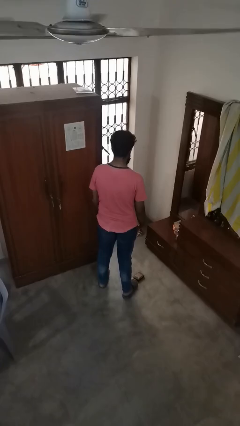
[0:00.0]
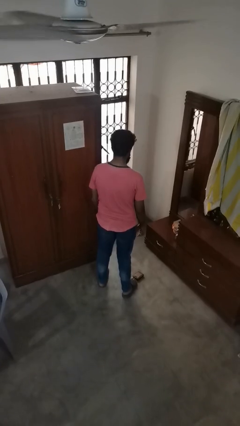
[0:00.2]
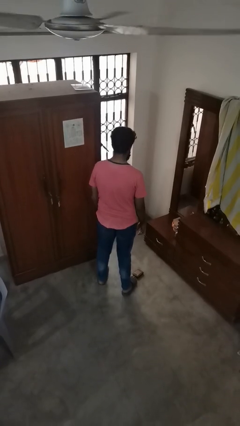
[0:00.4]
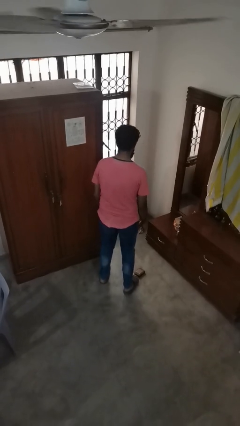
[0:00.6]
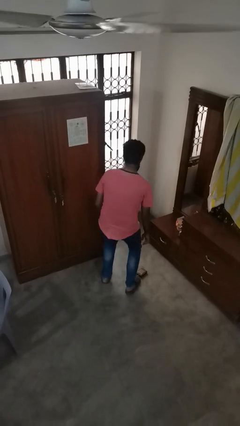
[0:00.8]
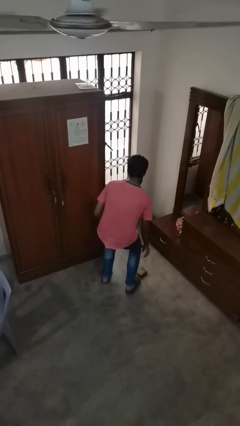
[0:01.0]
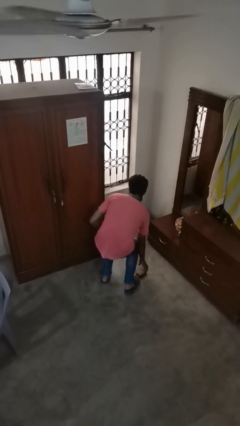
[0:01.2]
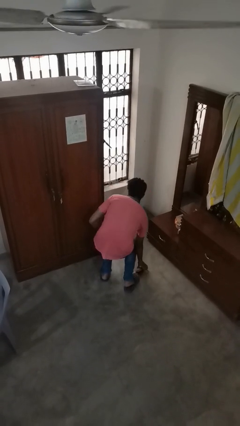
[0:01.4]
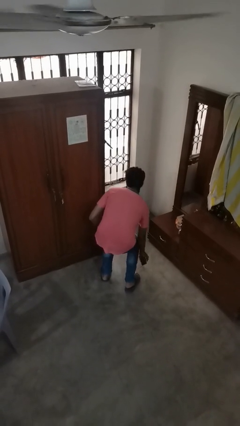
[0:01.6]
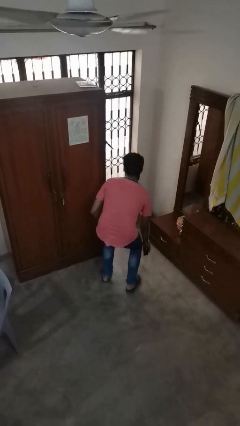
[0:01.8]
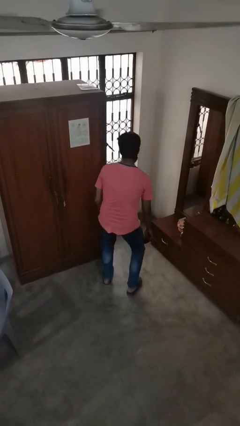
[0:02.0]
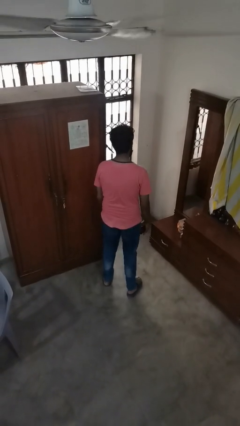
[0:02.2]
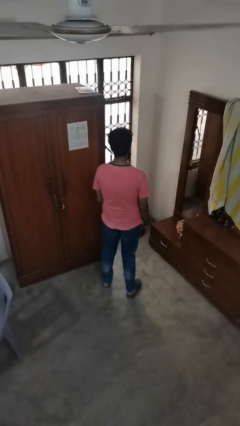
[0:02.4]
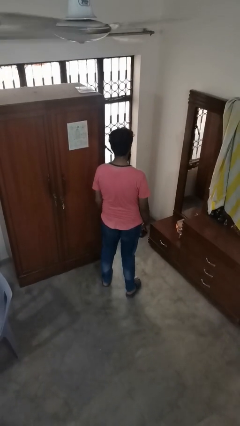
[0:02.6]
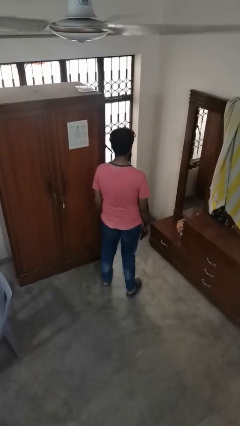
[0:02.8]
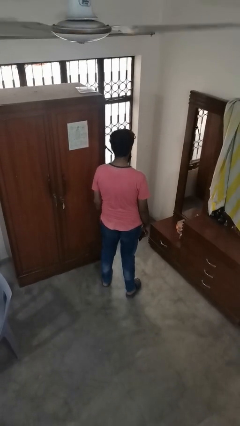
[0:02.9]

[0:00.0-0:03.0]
person picks up object from floor

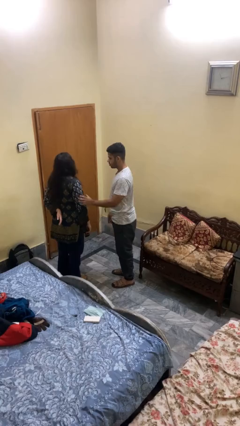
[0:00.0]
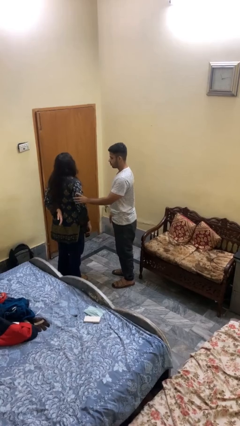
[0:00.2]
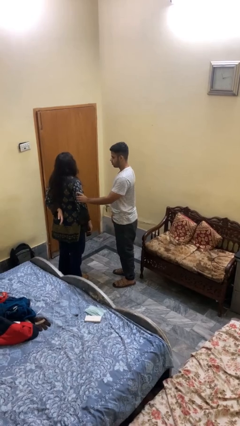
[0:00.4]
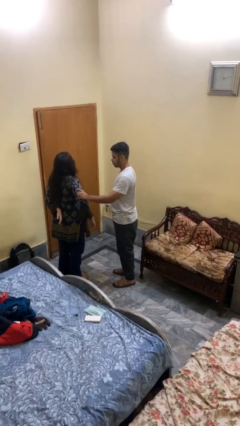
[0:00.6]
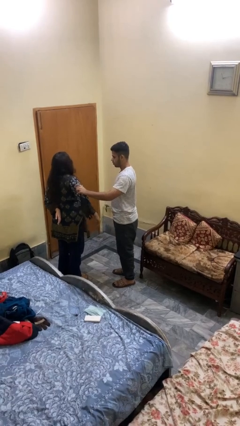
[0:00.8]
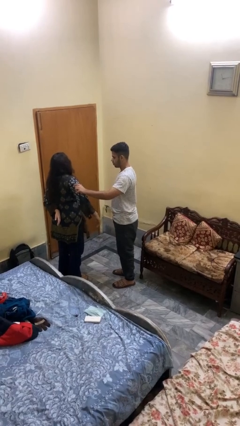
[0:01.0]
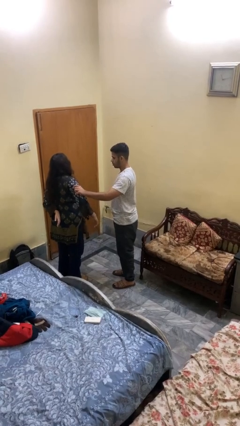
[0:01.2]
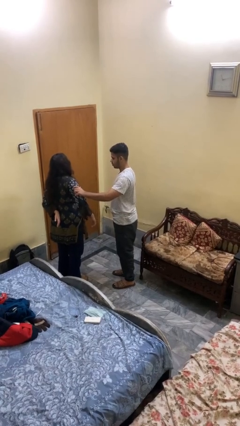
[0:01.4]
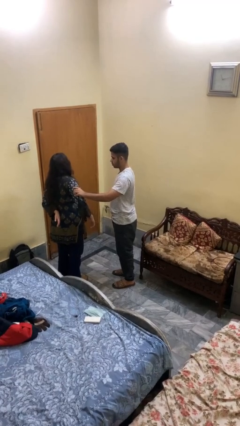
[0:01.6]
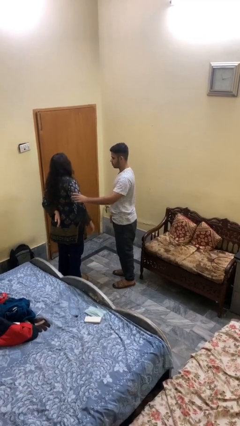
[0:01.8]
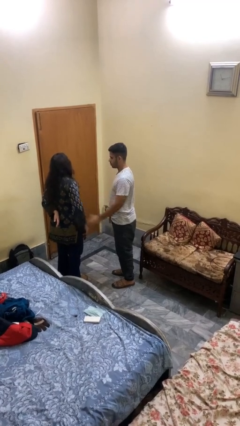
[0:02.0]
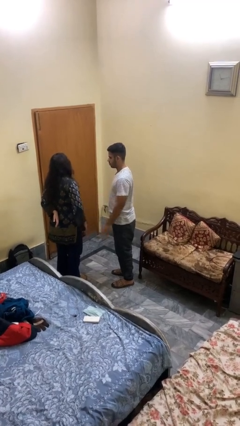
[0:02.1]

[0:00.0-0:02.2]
person grabs person by bicep

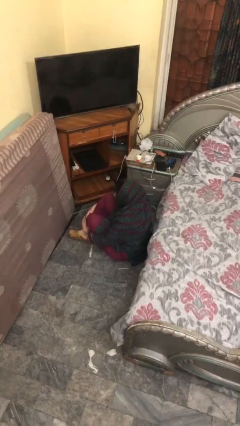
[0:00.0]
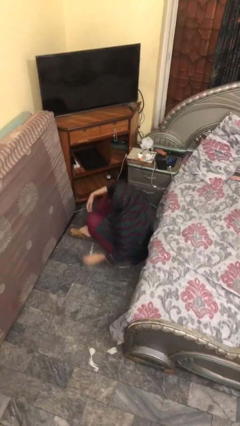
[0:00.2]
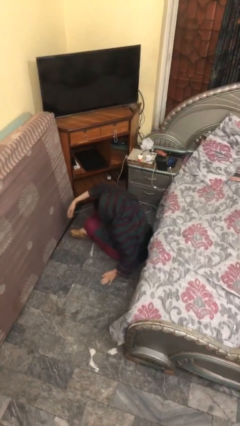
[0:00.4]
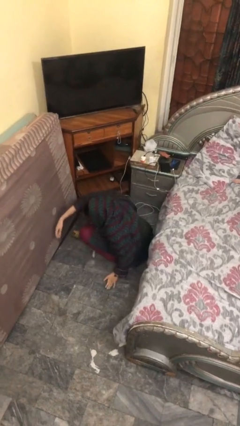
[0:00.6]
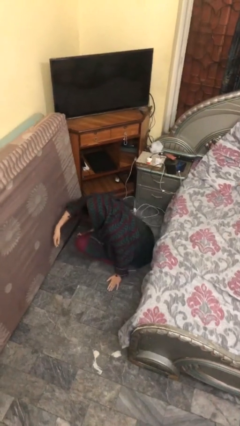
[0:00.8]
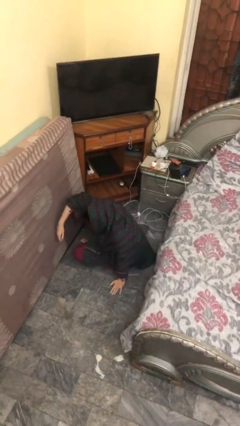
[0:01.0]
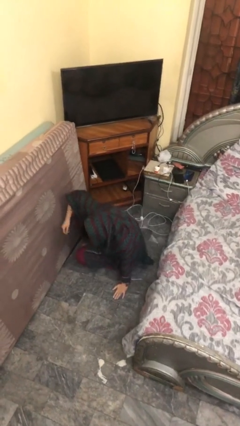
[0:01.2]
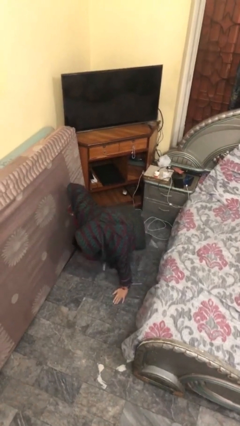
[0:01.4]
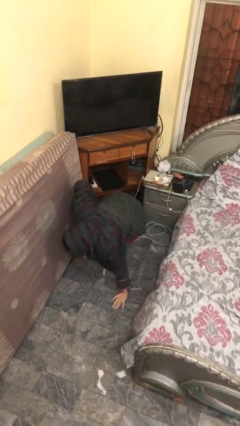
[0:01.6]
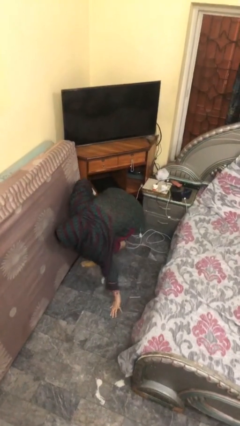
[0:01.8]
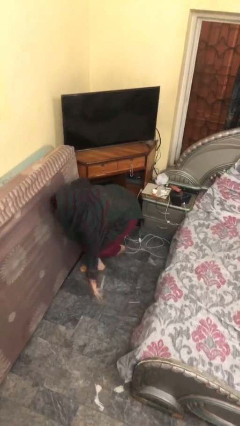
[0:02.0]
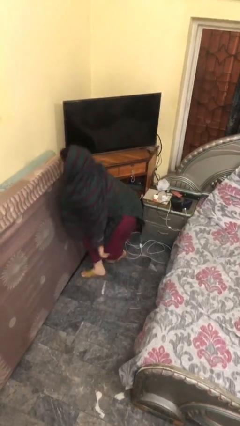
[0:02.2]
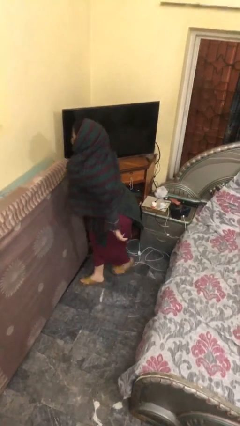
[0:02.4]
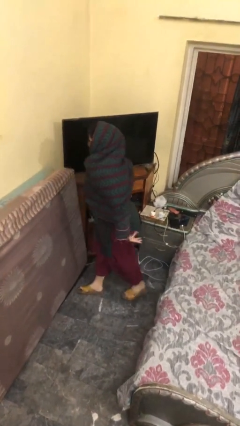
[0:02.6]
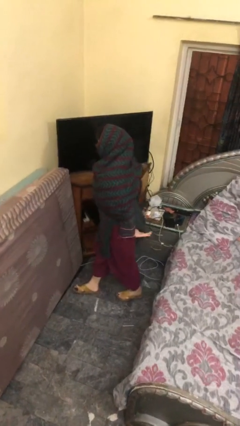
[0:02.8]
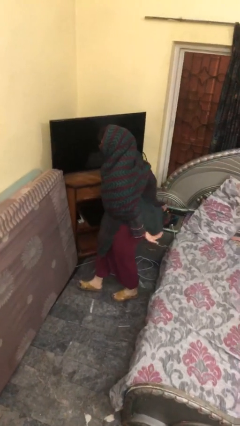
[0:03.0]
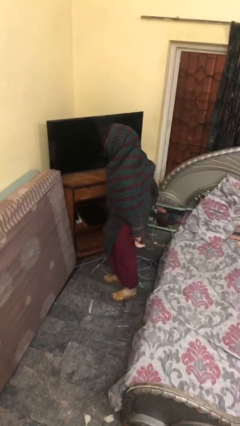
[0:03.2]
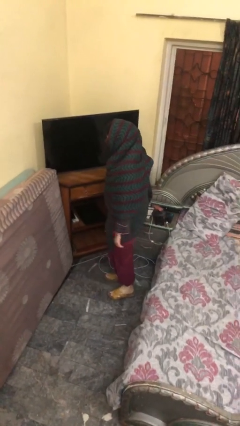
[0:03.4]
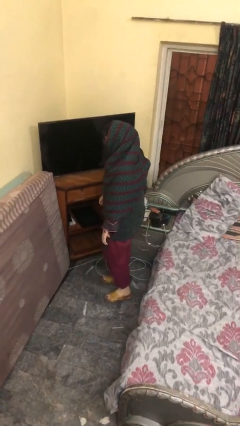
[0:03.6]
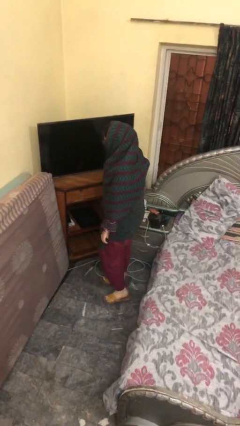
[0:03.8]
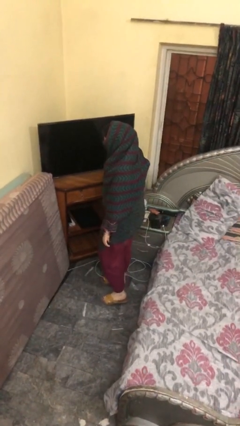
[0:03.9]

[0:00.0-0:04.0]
person stands up from floor

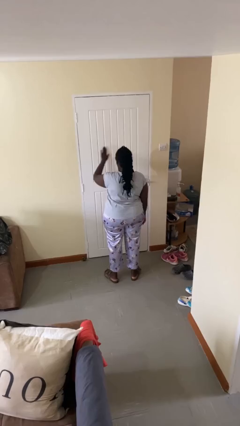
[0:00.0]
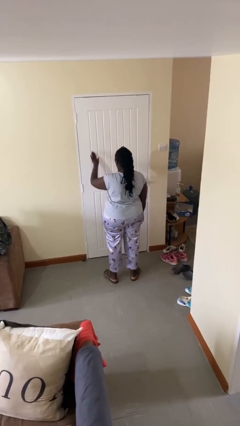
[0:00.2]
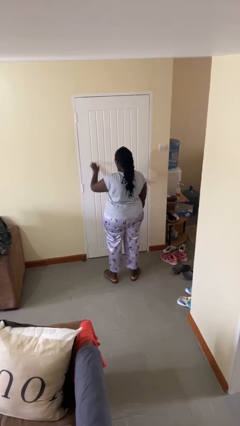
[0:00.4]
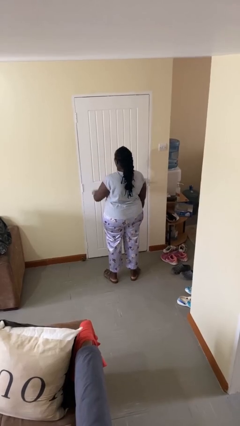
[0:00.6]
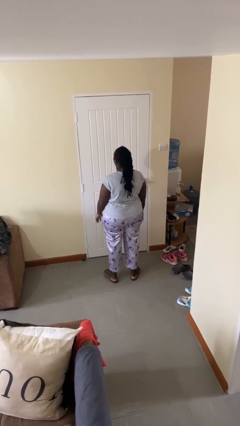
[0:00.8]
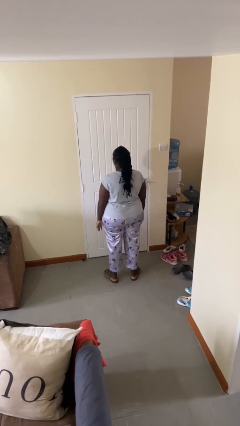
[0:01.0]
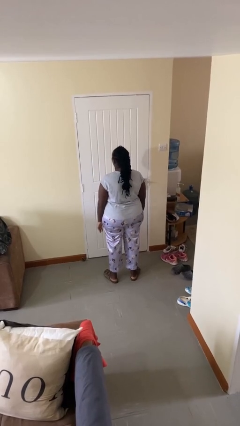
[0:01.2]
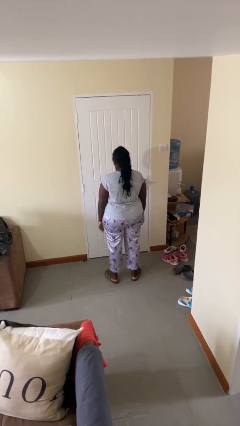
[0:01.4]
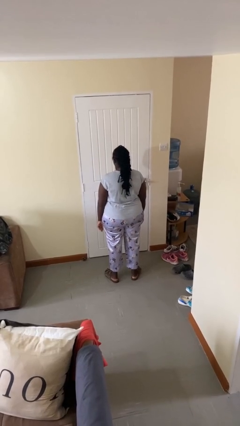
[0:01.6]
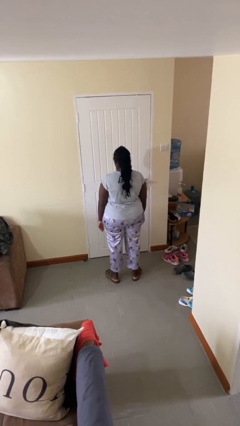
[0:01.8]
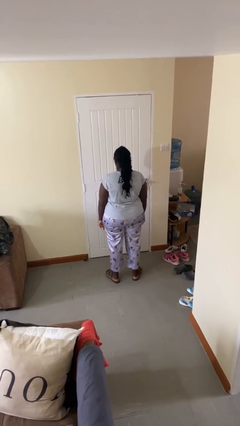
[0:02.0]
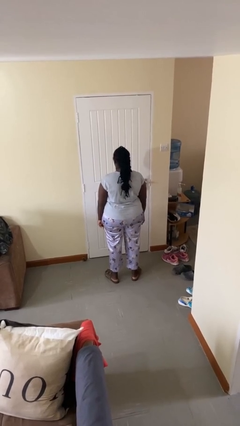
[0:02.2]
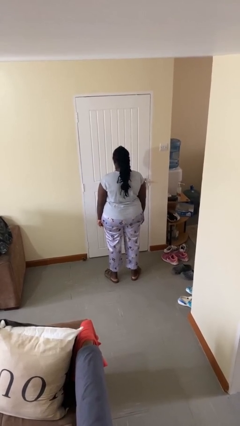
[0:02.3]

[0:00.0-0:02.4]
person gestures swipe left

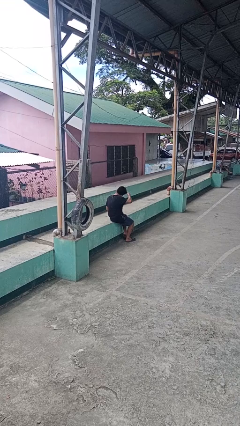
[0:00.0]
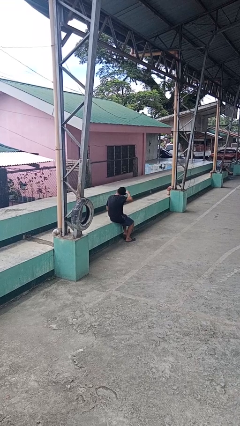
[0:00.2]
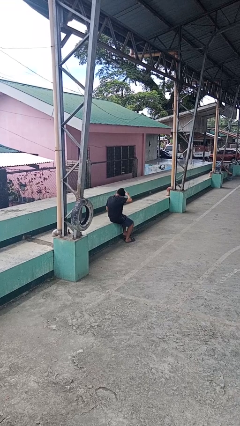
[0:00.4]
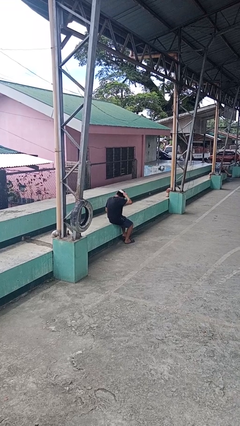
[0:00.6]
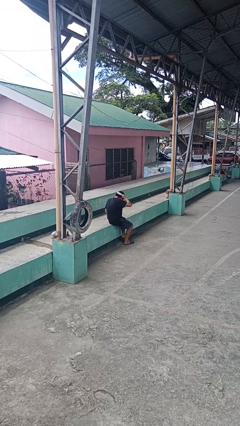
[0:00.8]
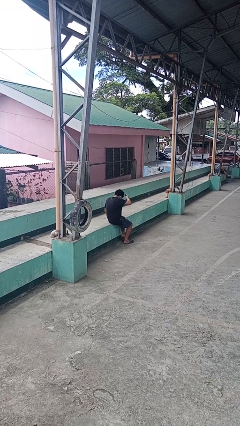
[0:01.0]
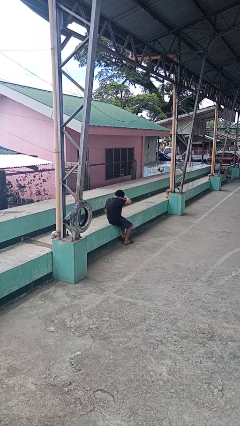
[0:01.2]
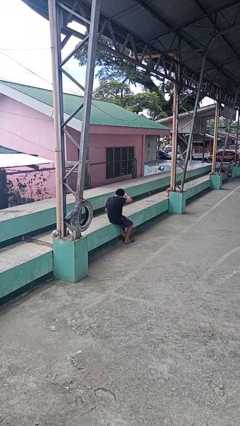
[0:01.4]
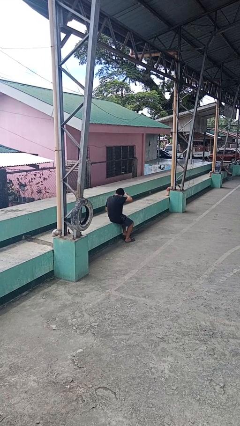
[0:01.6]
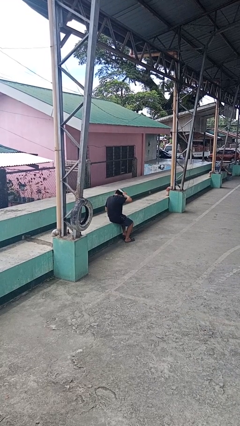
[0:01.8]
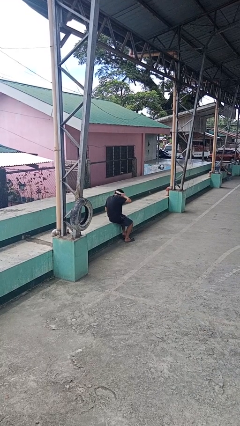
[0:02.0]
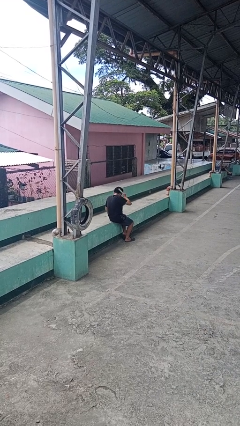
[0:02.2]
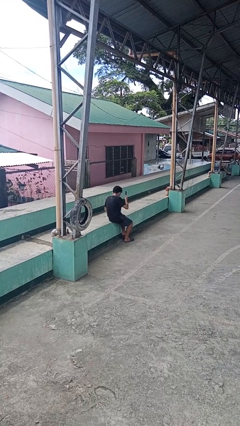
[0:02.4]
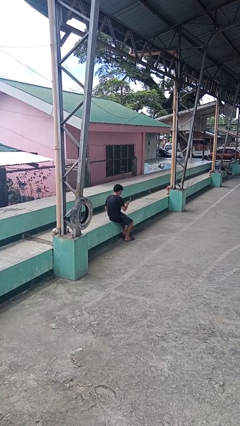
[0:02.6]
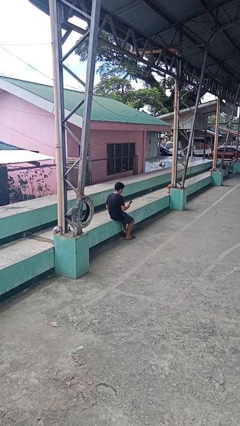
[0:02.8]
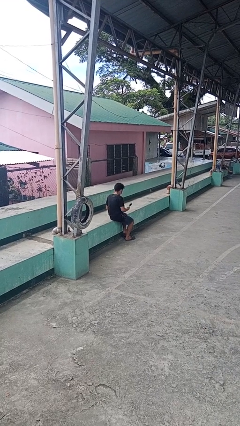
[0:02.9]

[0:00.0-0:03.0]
person brushes hair

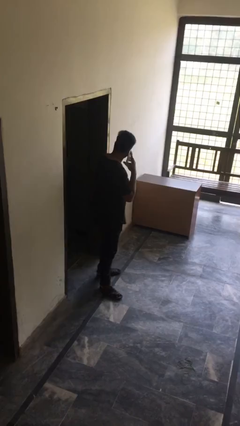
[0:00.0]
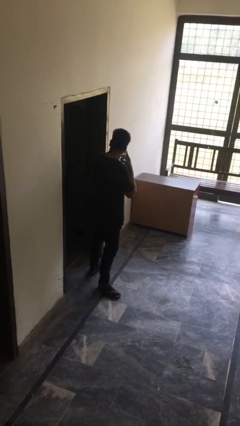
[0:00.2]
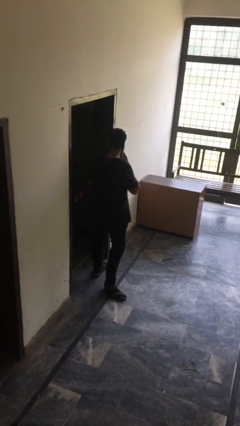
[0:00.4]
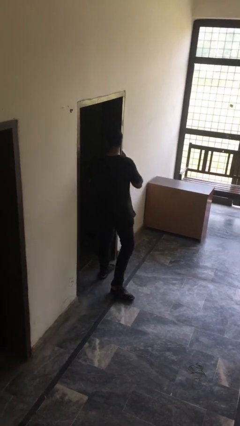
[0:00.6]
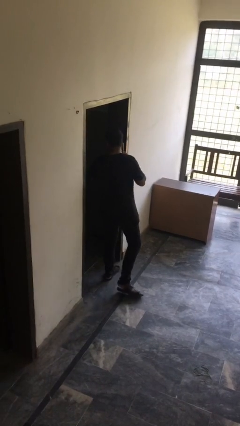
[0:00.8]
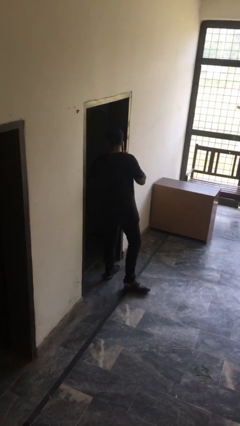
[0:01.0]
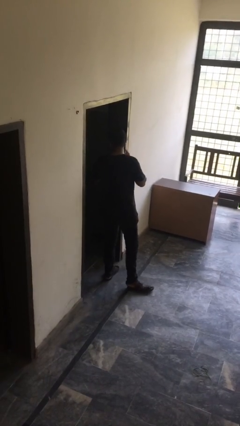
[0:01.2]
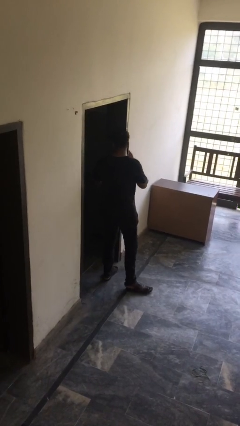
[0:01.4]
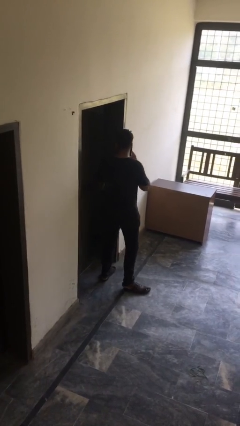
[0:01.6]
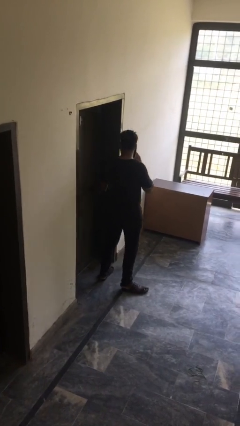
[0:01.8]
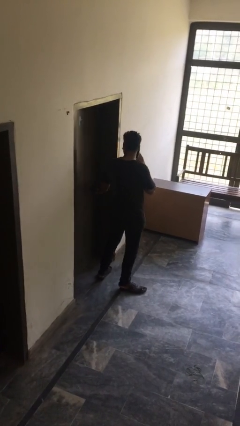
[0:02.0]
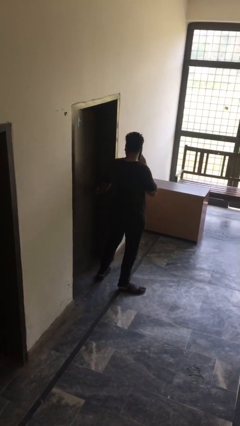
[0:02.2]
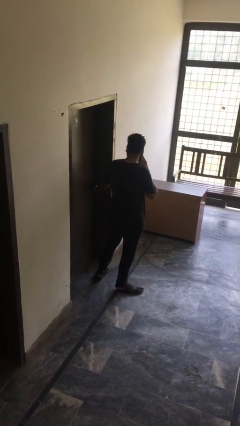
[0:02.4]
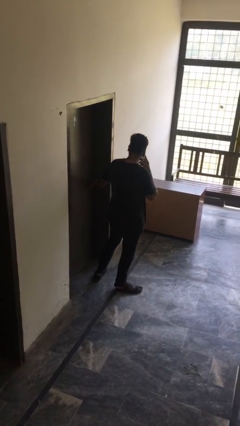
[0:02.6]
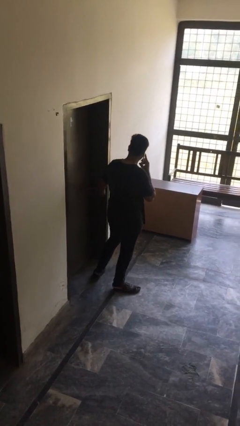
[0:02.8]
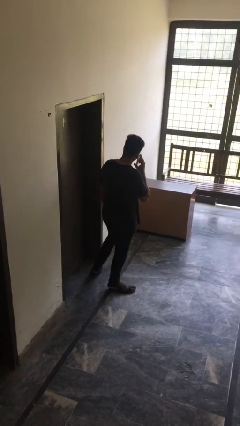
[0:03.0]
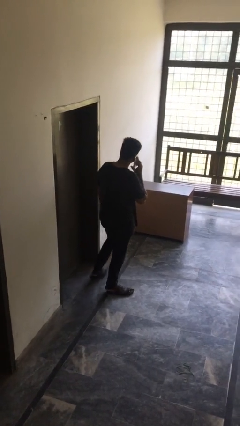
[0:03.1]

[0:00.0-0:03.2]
person closes facility door
